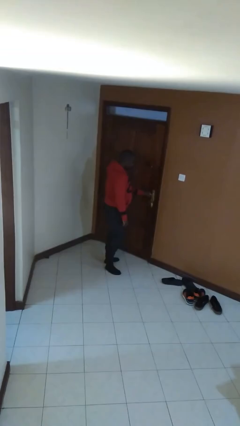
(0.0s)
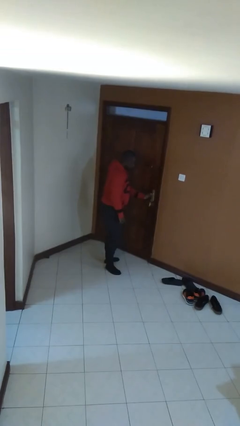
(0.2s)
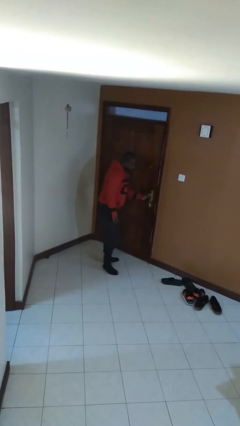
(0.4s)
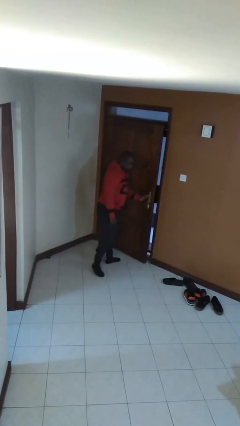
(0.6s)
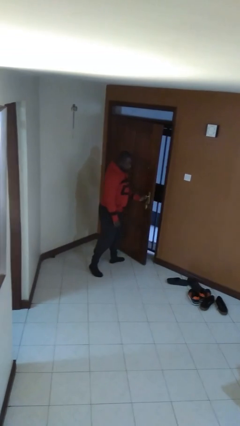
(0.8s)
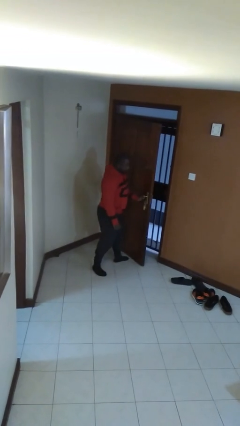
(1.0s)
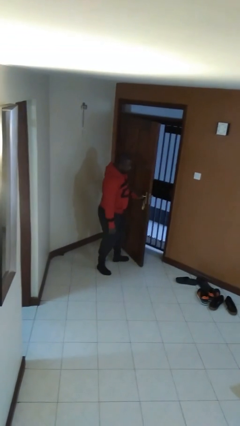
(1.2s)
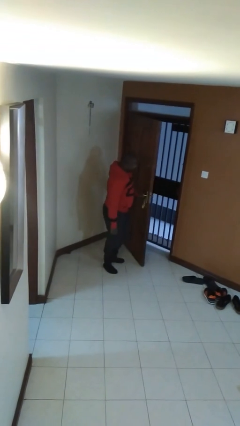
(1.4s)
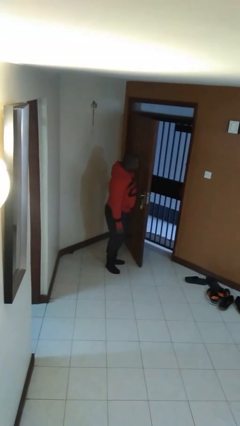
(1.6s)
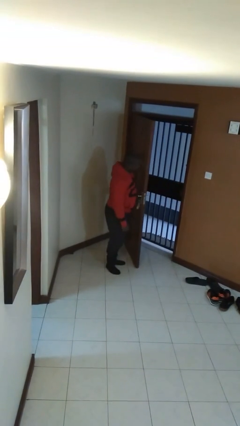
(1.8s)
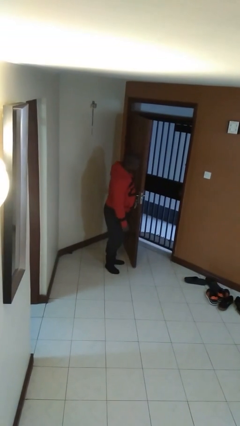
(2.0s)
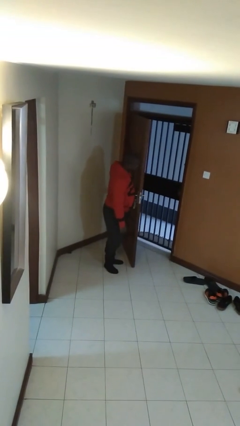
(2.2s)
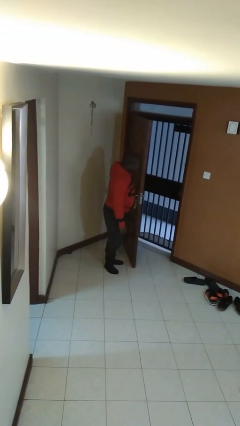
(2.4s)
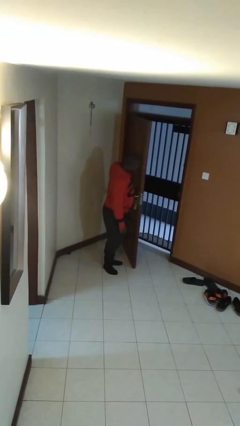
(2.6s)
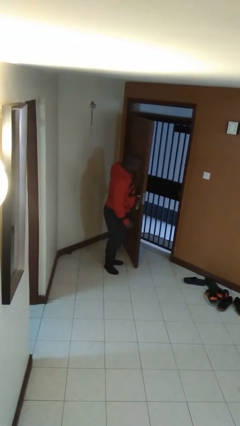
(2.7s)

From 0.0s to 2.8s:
person opens facility door

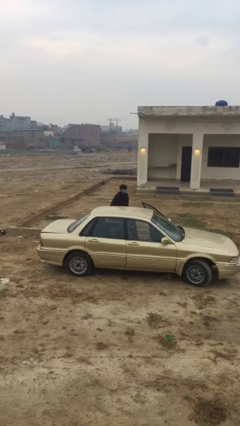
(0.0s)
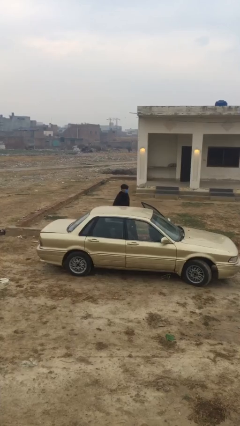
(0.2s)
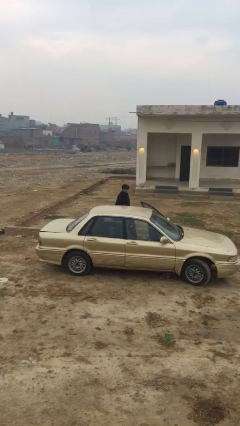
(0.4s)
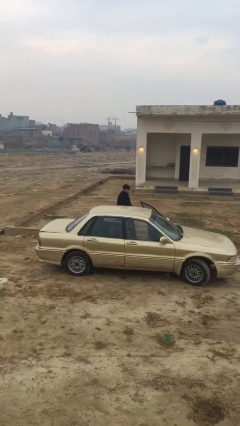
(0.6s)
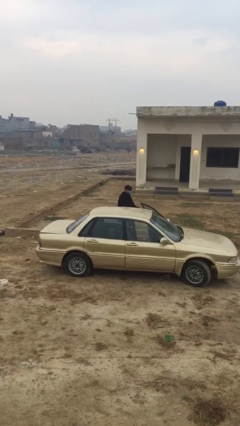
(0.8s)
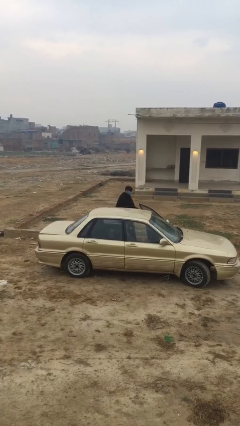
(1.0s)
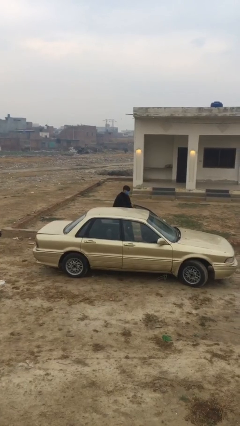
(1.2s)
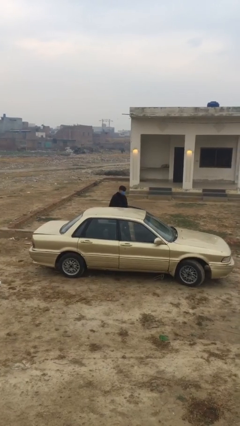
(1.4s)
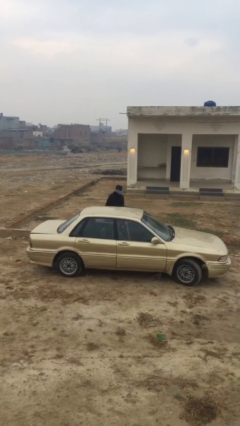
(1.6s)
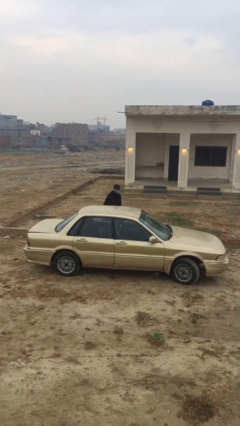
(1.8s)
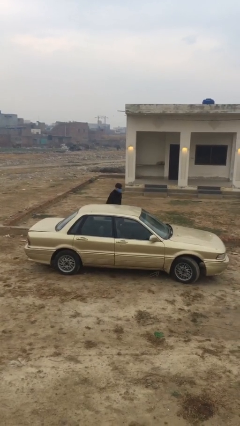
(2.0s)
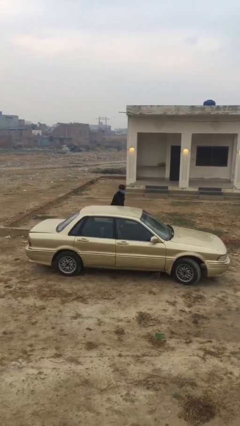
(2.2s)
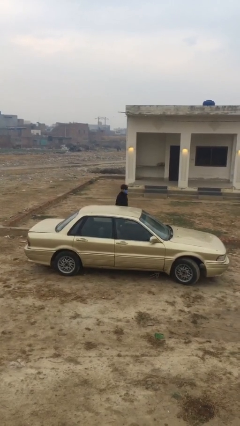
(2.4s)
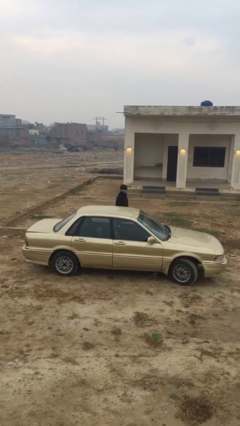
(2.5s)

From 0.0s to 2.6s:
person closes car door

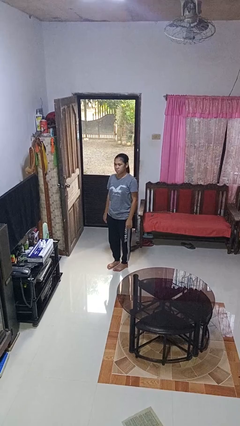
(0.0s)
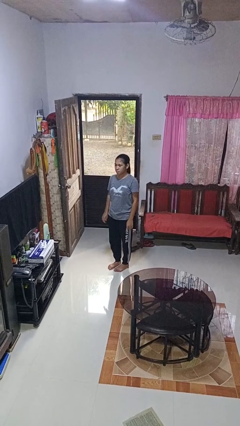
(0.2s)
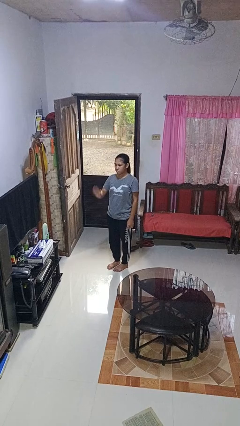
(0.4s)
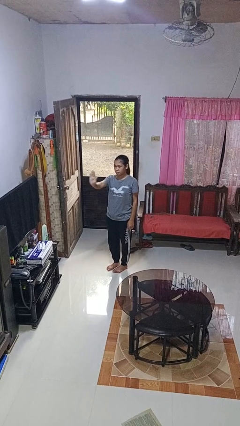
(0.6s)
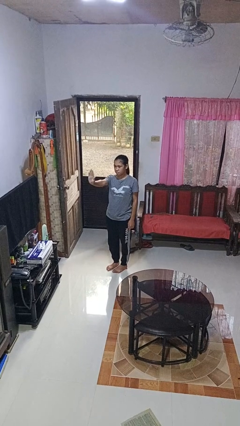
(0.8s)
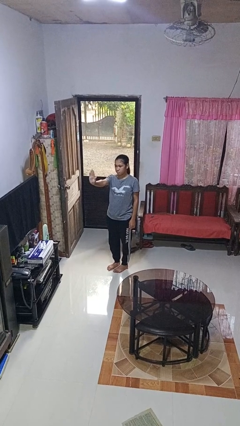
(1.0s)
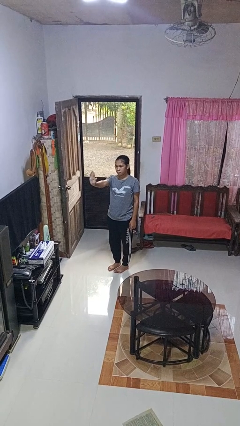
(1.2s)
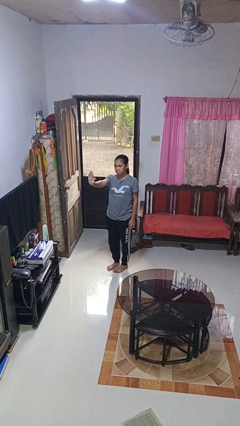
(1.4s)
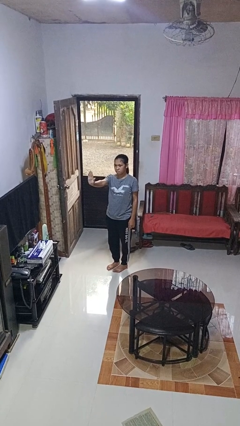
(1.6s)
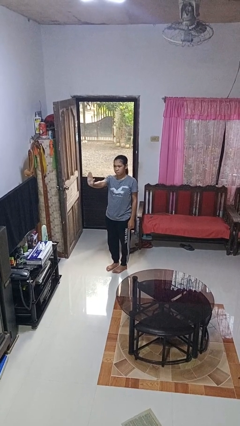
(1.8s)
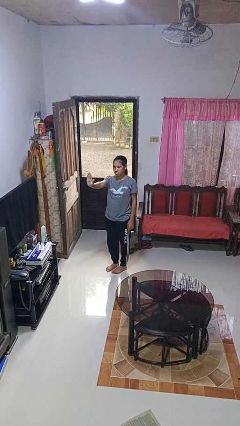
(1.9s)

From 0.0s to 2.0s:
person gestures stop

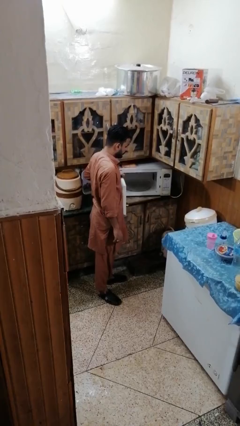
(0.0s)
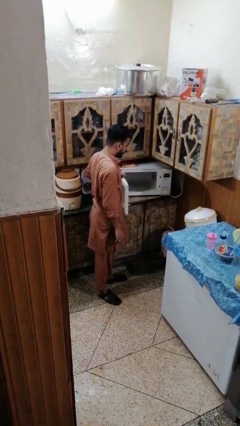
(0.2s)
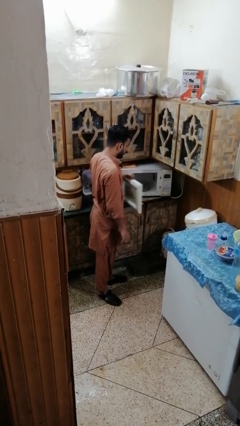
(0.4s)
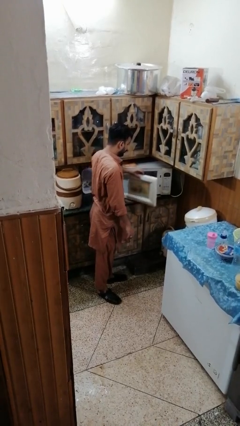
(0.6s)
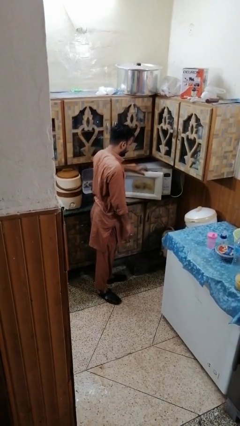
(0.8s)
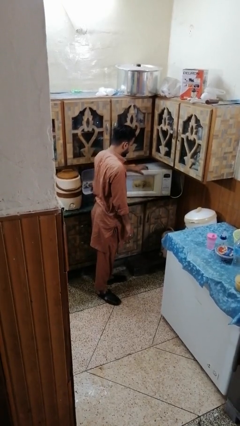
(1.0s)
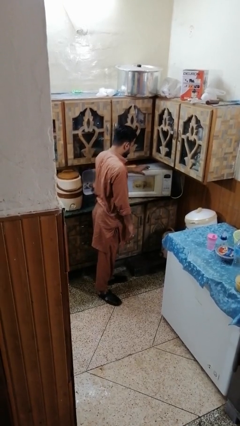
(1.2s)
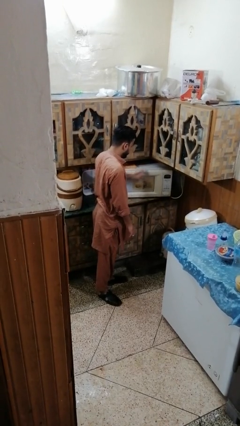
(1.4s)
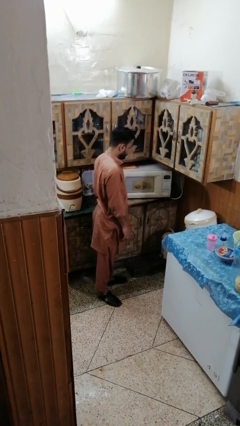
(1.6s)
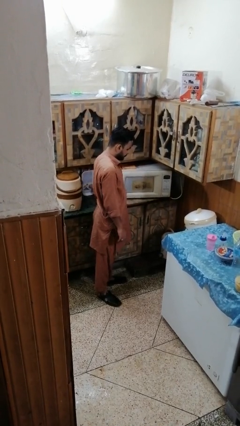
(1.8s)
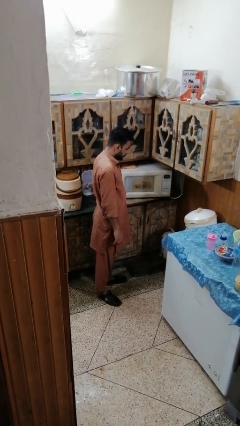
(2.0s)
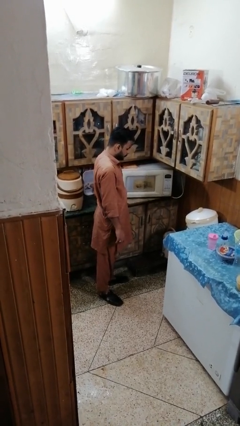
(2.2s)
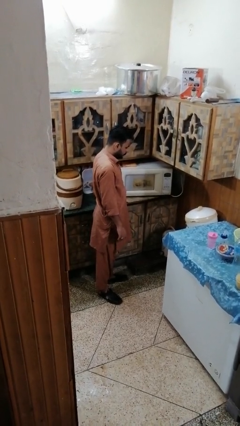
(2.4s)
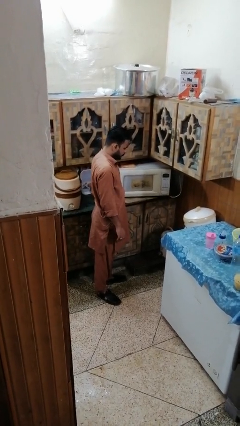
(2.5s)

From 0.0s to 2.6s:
person closes microwave

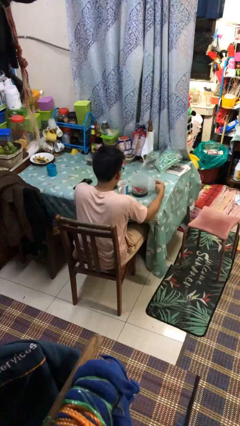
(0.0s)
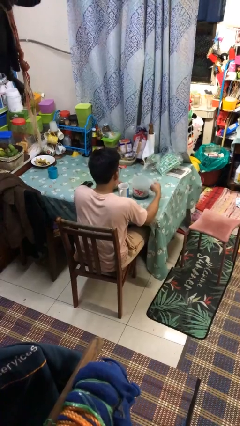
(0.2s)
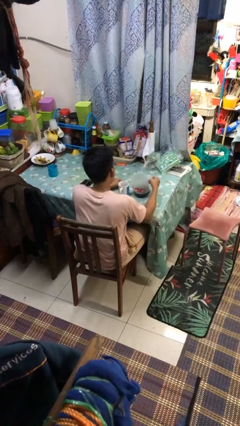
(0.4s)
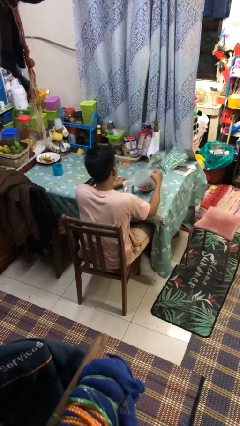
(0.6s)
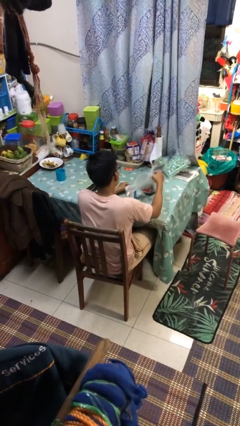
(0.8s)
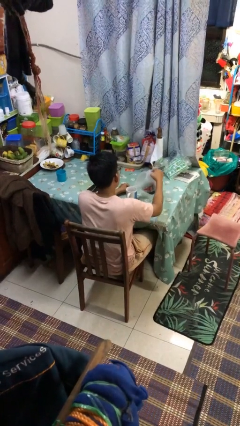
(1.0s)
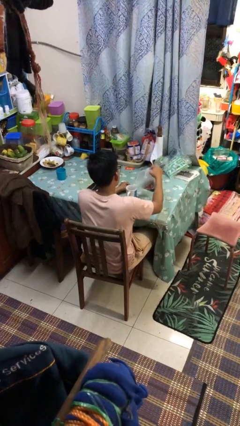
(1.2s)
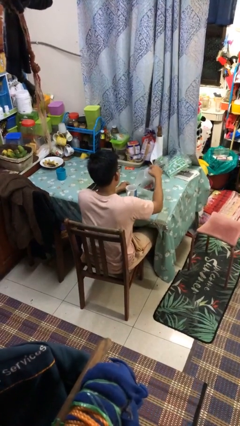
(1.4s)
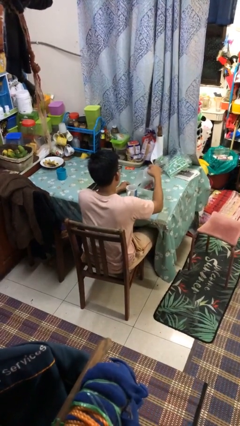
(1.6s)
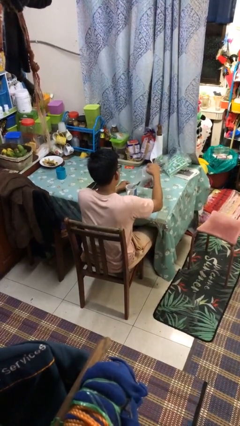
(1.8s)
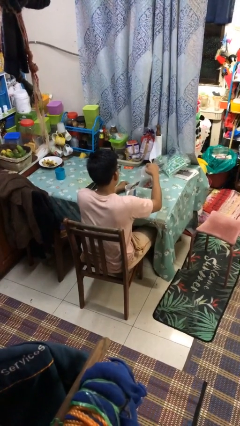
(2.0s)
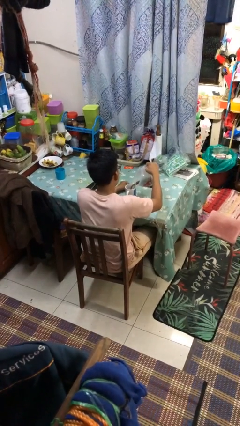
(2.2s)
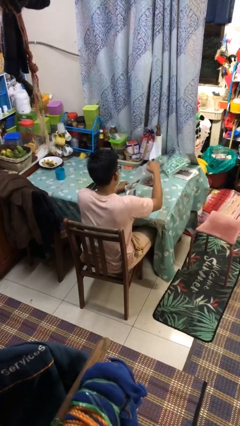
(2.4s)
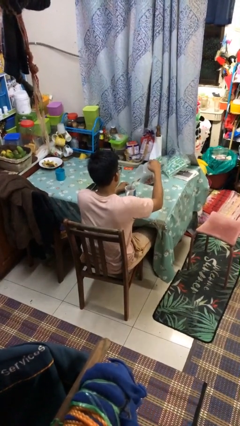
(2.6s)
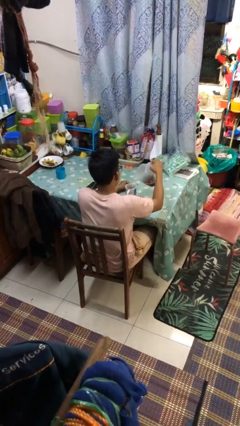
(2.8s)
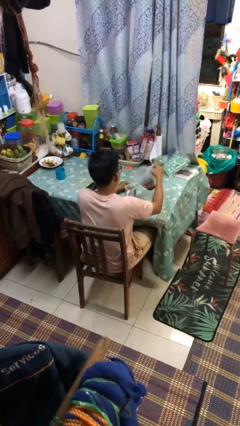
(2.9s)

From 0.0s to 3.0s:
person pours coffee into mug

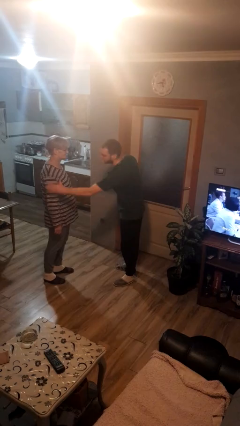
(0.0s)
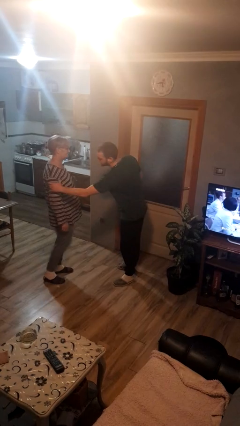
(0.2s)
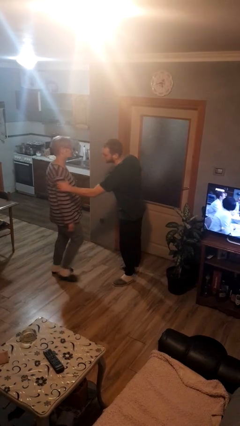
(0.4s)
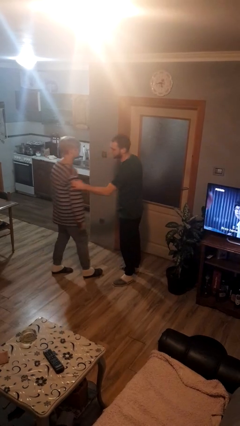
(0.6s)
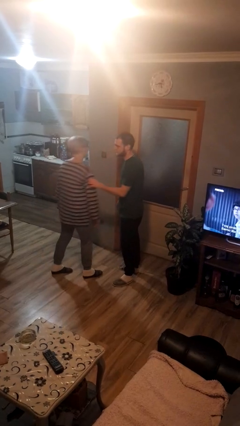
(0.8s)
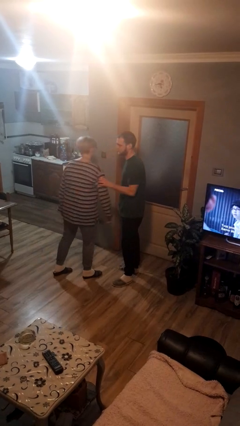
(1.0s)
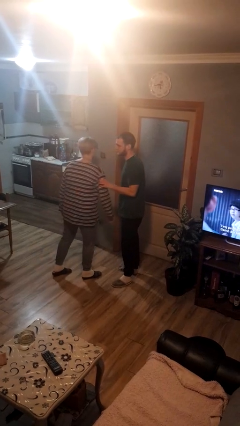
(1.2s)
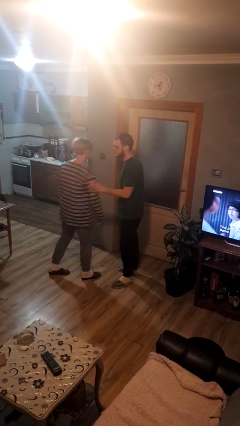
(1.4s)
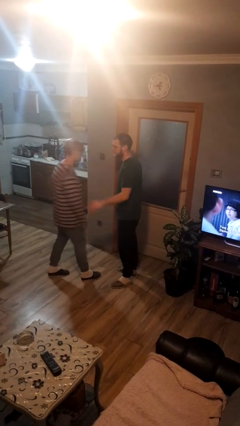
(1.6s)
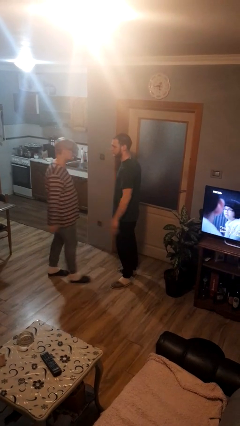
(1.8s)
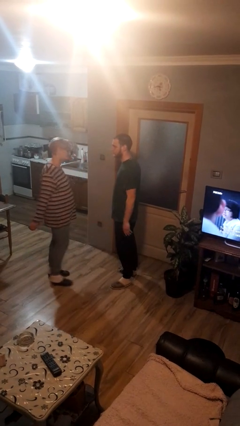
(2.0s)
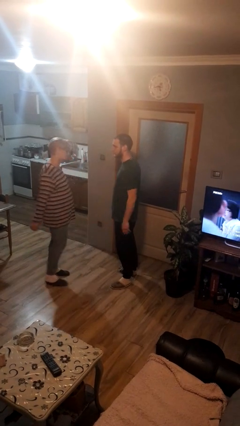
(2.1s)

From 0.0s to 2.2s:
person grabs person by bicep

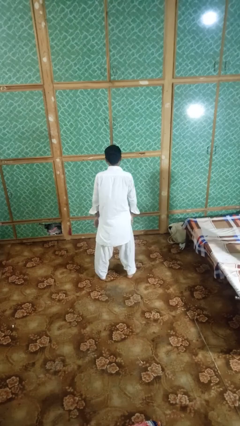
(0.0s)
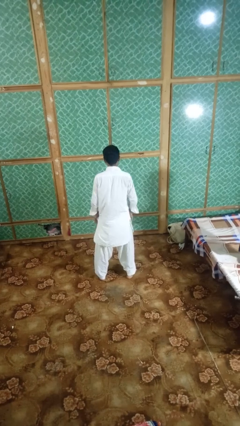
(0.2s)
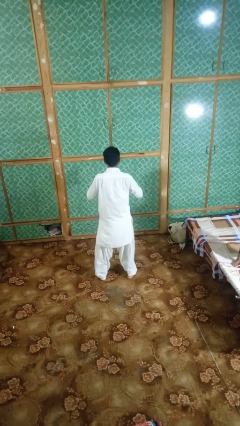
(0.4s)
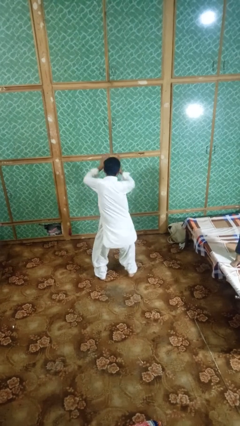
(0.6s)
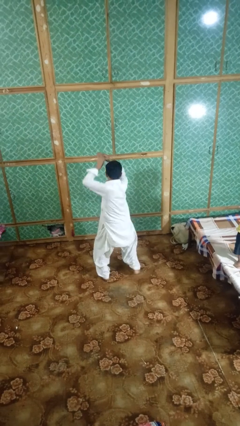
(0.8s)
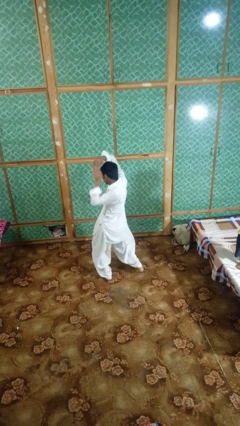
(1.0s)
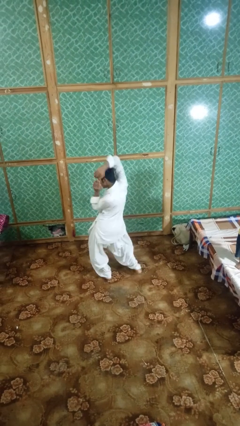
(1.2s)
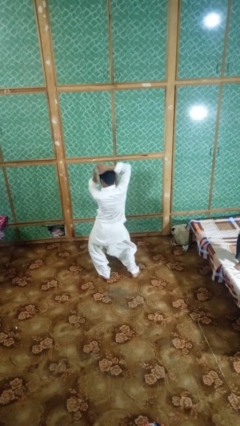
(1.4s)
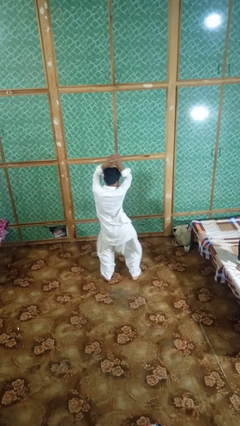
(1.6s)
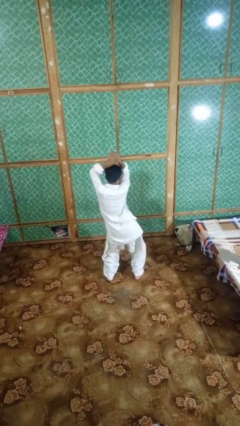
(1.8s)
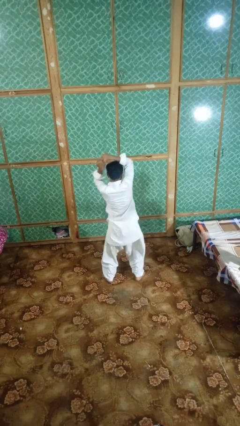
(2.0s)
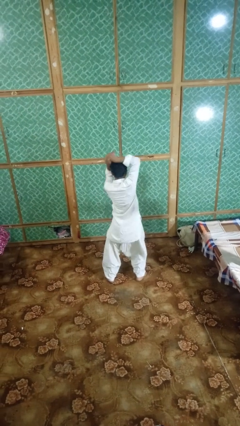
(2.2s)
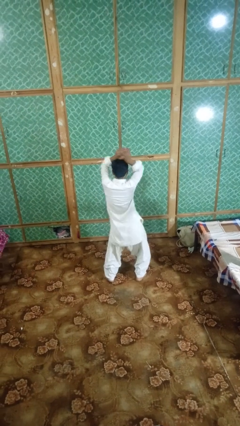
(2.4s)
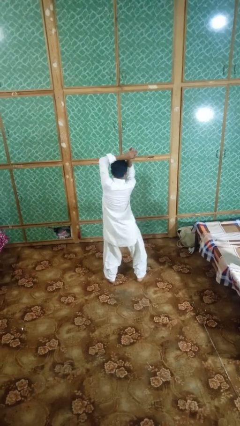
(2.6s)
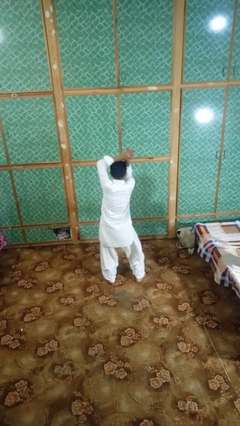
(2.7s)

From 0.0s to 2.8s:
person dances in place
